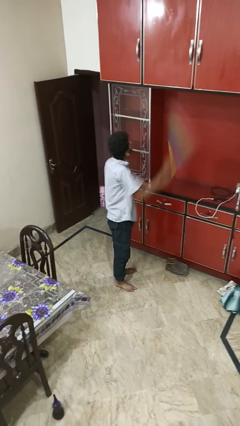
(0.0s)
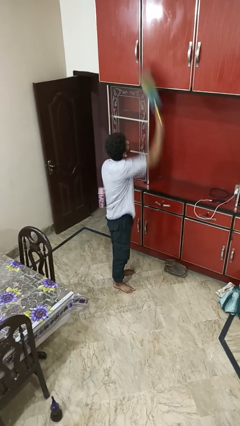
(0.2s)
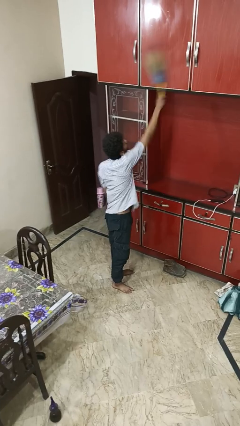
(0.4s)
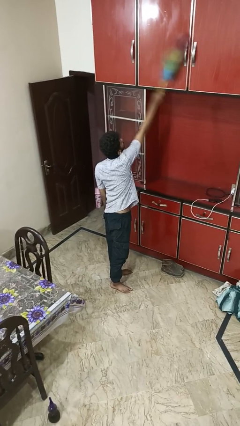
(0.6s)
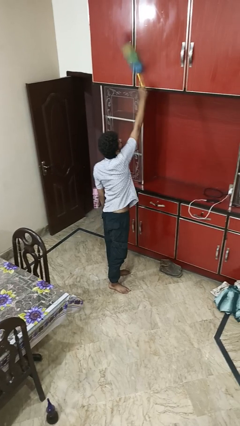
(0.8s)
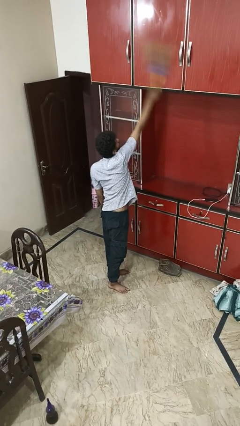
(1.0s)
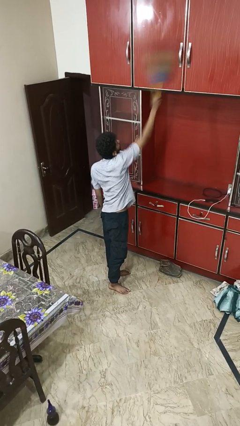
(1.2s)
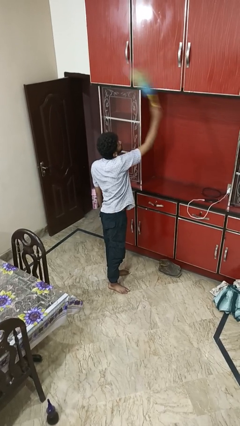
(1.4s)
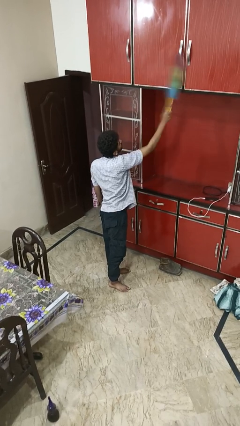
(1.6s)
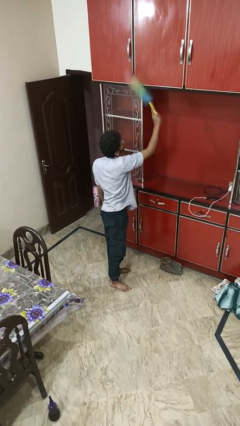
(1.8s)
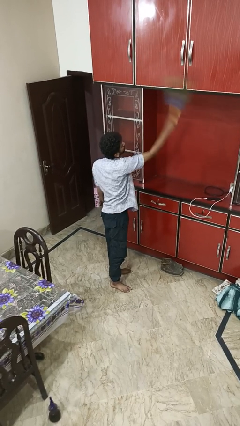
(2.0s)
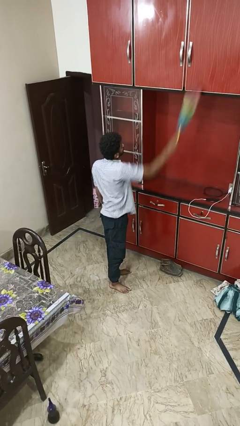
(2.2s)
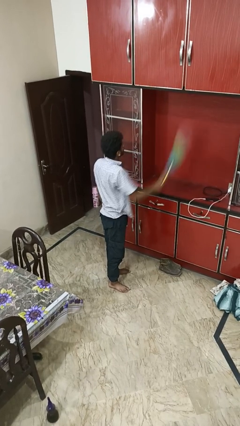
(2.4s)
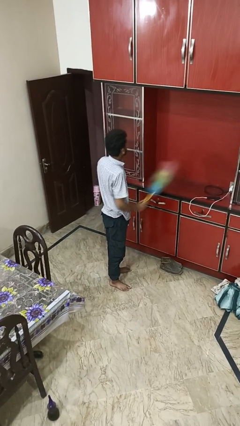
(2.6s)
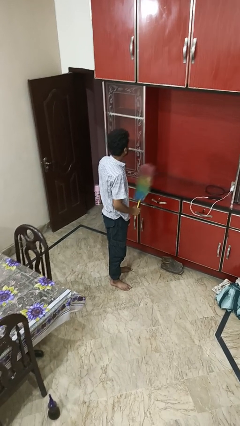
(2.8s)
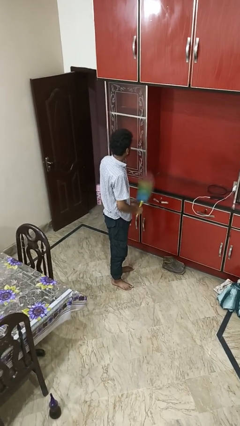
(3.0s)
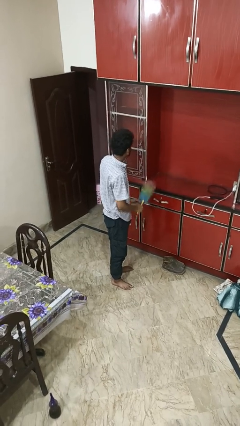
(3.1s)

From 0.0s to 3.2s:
person dusts furniture

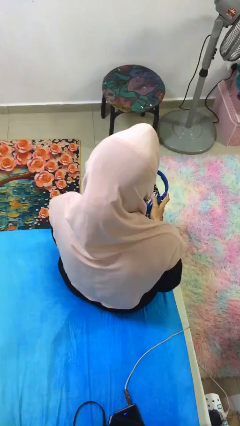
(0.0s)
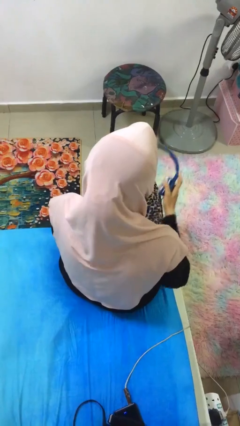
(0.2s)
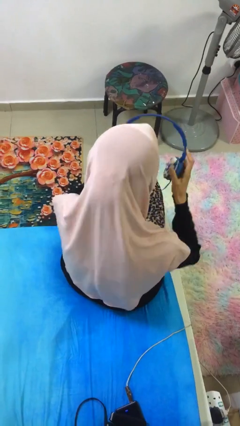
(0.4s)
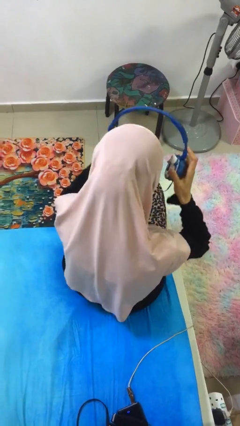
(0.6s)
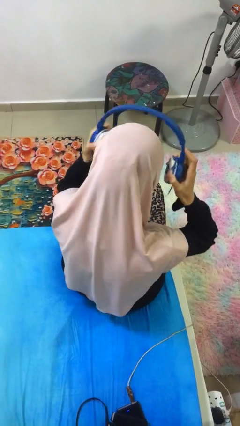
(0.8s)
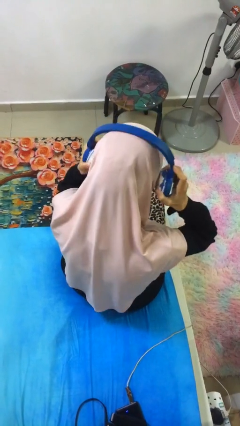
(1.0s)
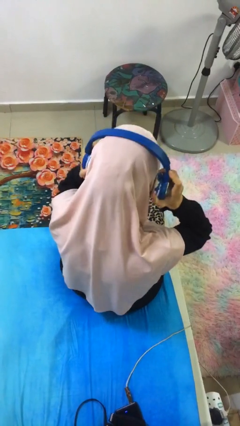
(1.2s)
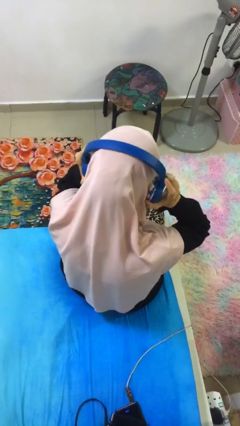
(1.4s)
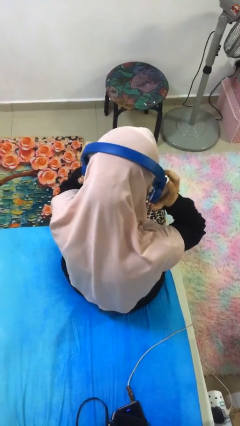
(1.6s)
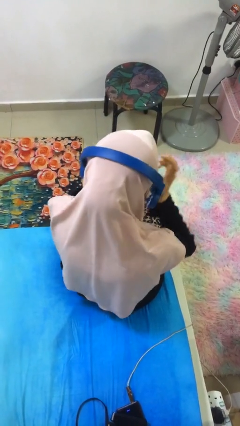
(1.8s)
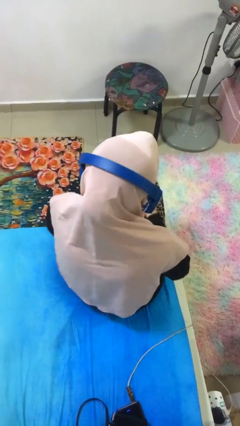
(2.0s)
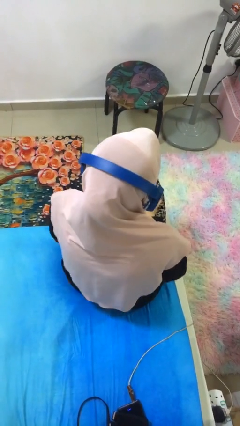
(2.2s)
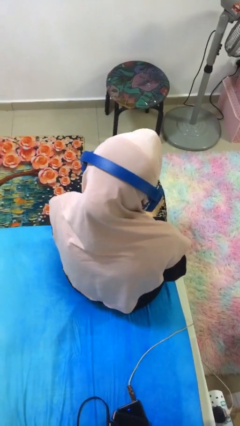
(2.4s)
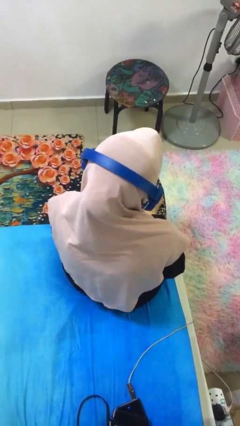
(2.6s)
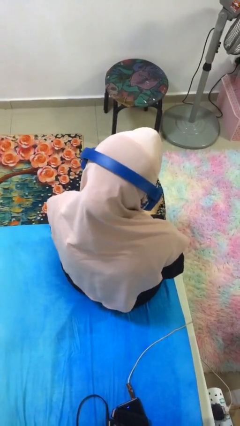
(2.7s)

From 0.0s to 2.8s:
person puts on headphones

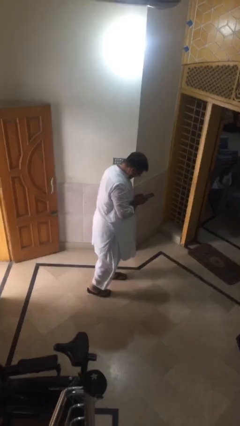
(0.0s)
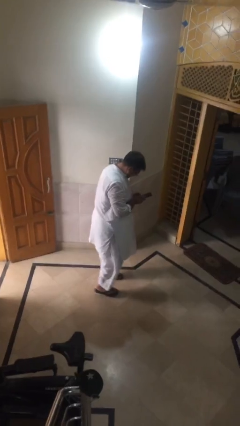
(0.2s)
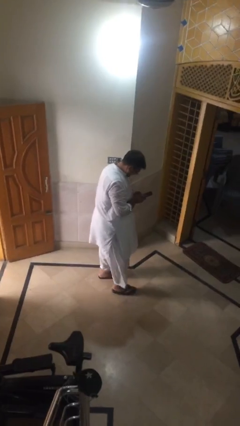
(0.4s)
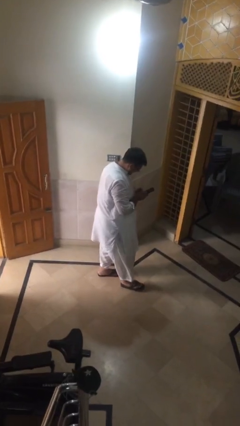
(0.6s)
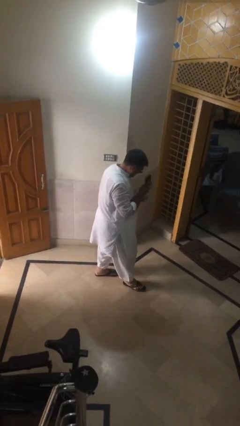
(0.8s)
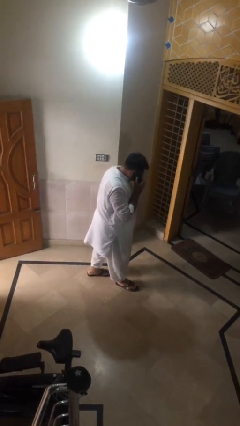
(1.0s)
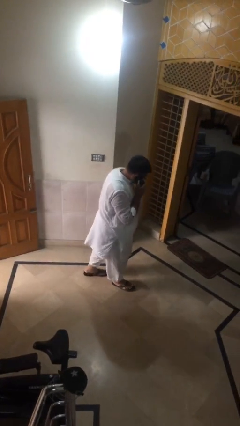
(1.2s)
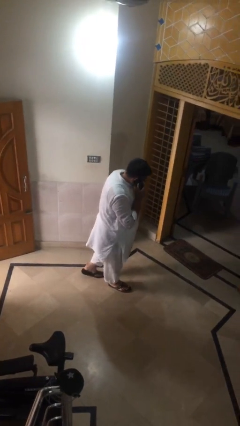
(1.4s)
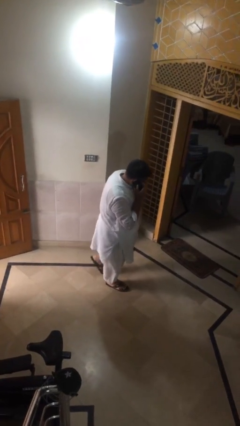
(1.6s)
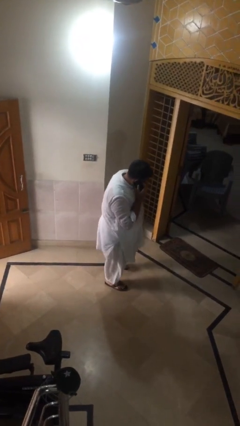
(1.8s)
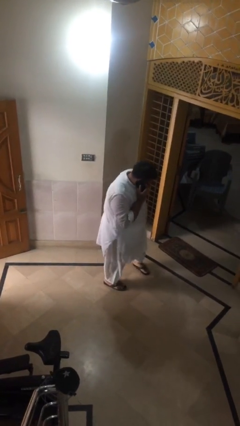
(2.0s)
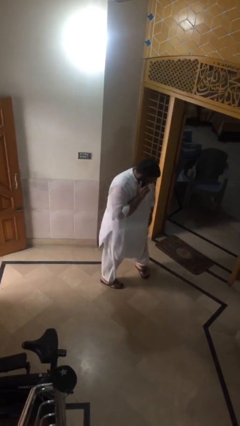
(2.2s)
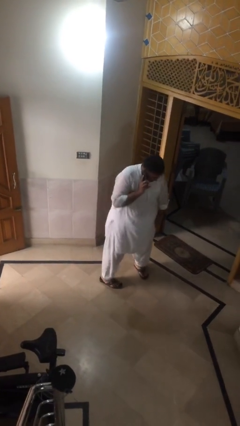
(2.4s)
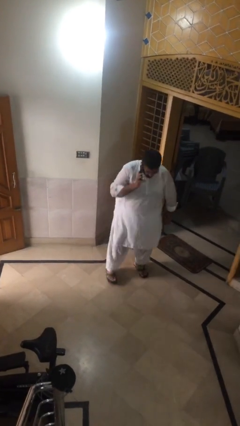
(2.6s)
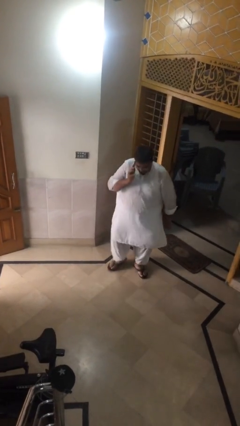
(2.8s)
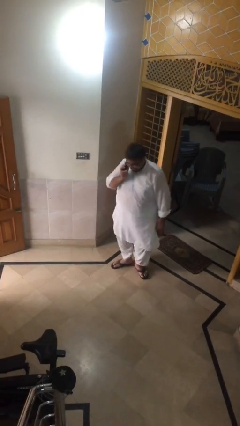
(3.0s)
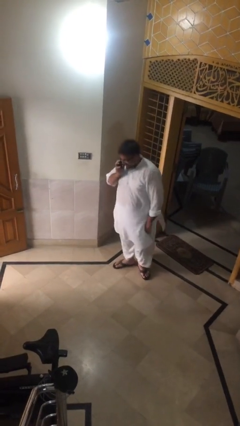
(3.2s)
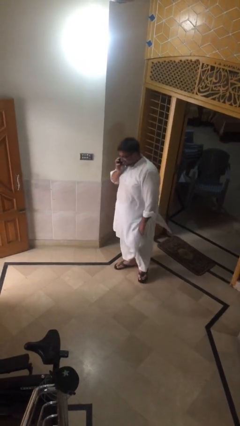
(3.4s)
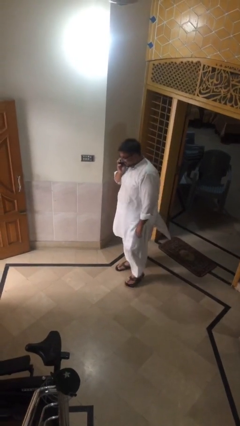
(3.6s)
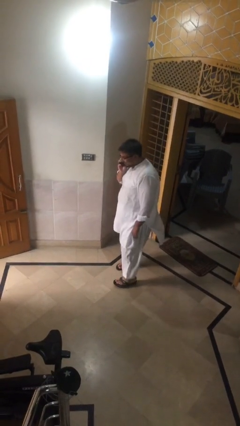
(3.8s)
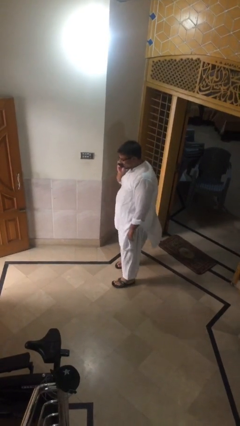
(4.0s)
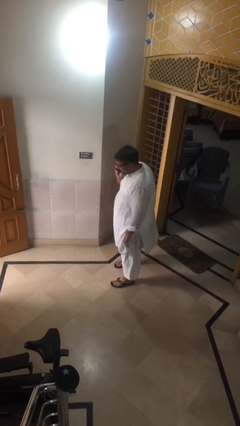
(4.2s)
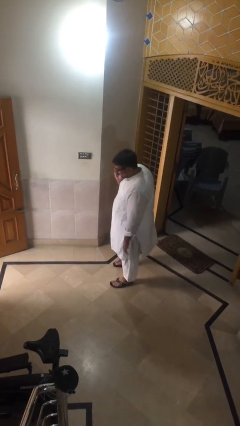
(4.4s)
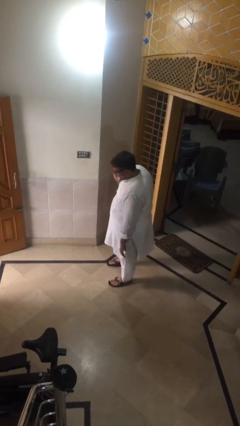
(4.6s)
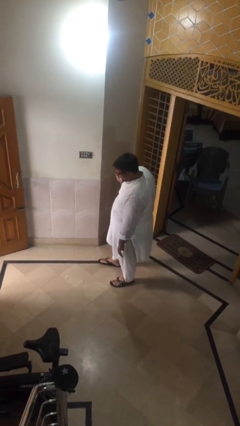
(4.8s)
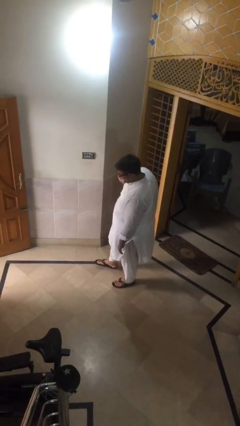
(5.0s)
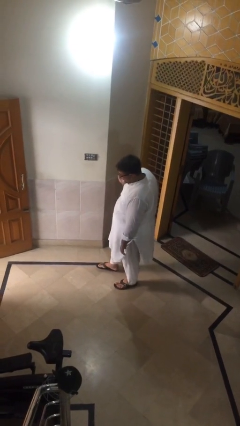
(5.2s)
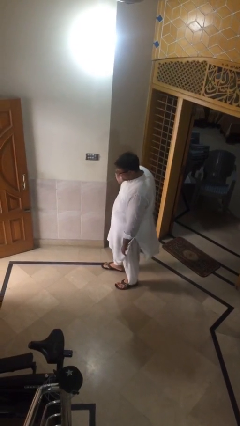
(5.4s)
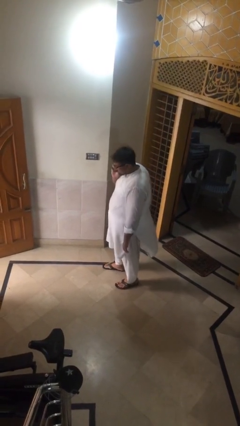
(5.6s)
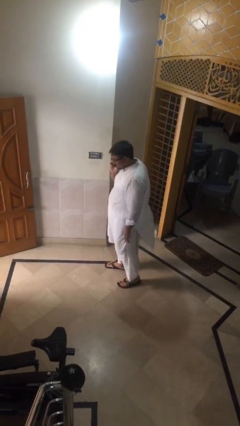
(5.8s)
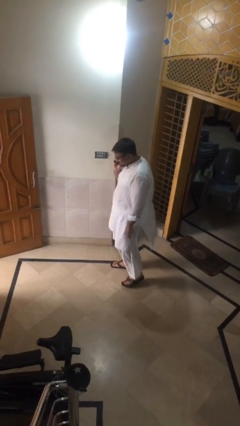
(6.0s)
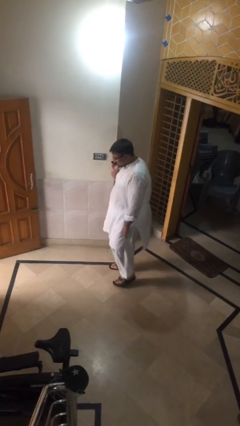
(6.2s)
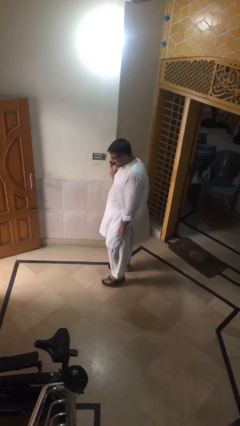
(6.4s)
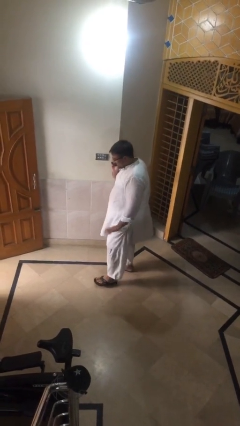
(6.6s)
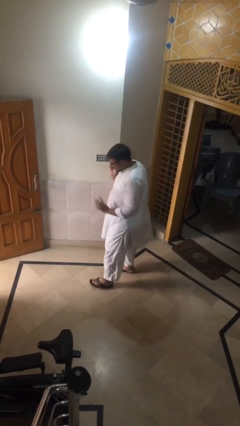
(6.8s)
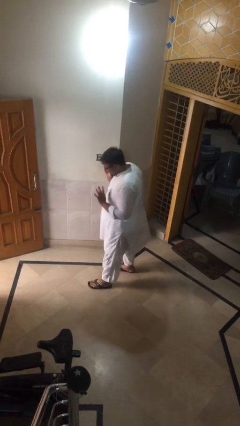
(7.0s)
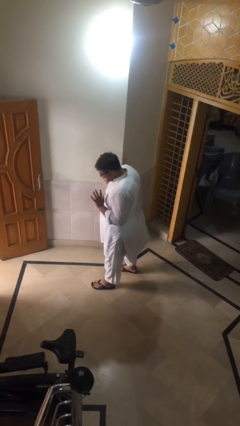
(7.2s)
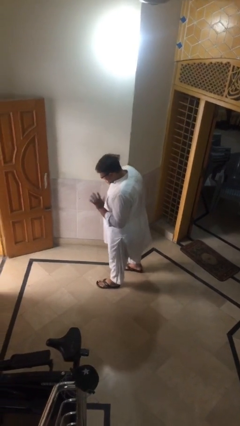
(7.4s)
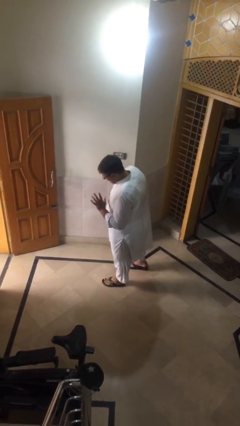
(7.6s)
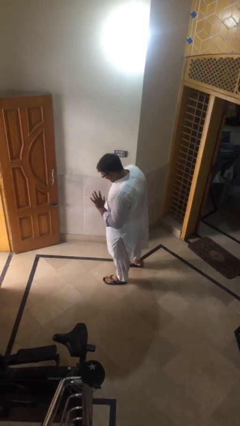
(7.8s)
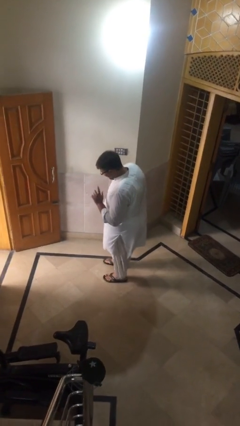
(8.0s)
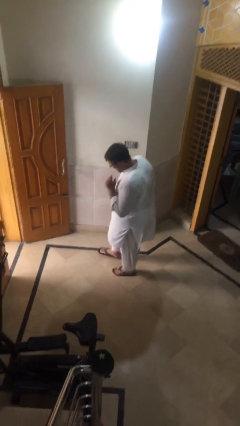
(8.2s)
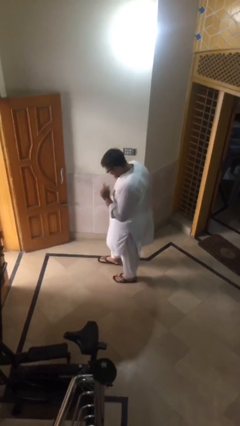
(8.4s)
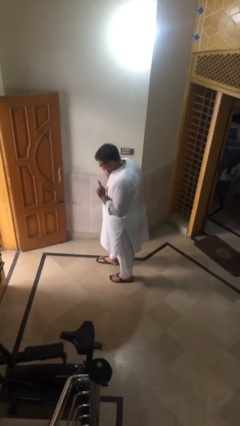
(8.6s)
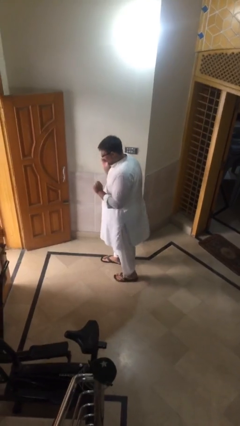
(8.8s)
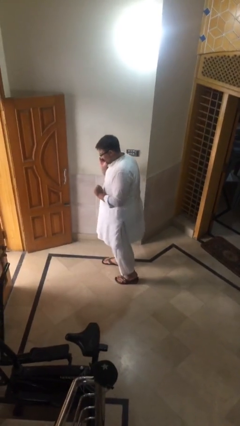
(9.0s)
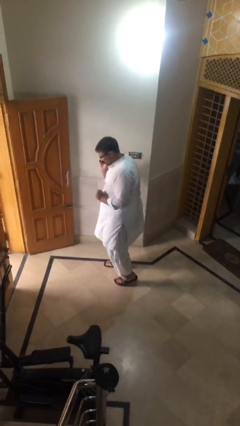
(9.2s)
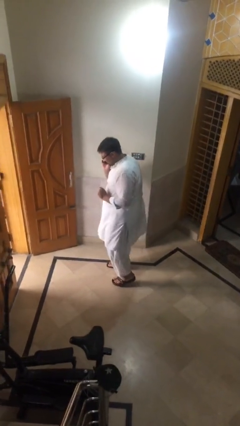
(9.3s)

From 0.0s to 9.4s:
person talks on phone

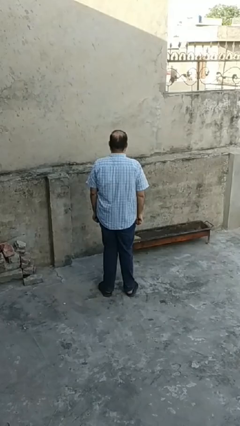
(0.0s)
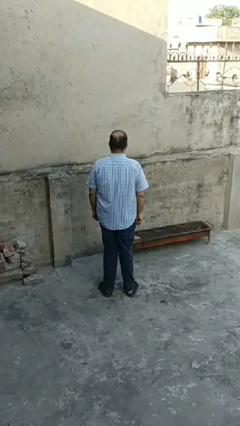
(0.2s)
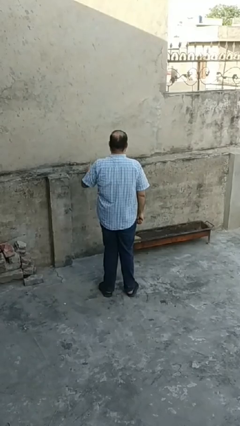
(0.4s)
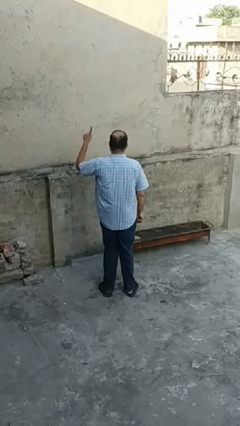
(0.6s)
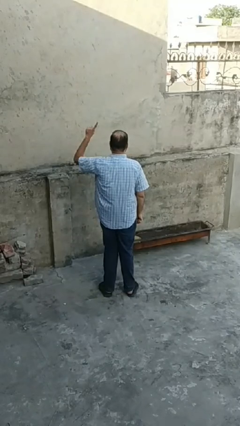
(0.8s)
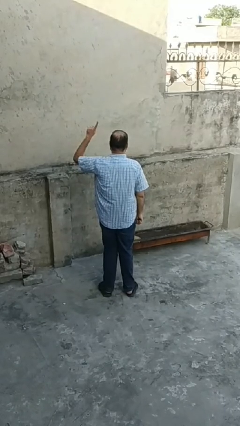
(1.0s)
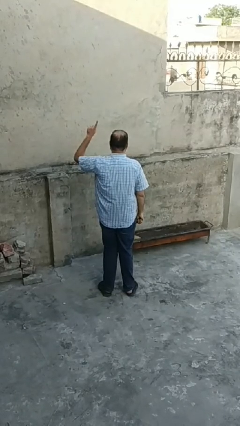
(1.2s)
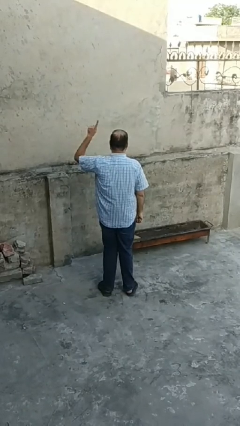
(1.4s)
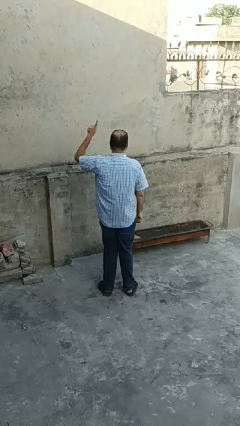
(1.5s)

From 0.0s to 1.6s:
person gestures number one

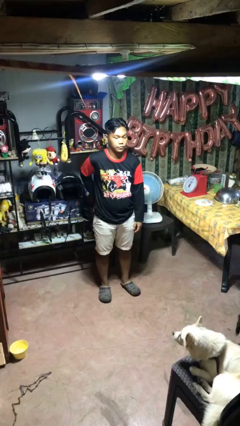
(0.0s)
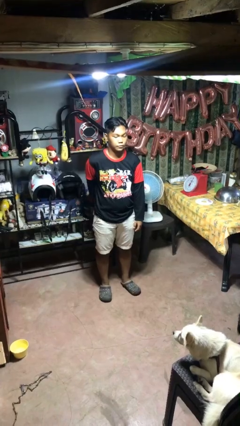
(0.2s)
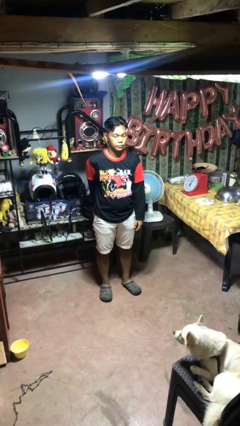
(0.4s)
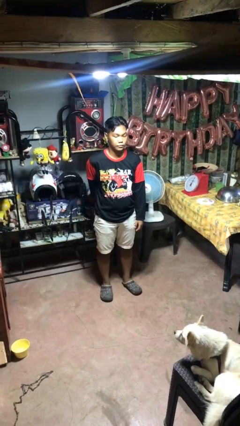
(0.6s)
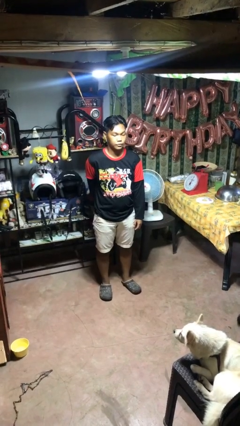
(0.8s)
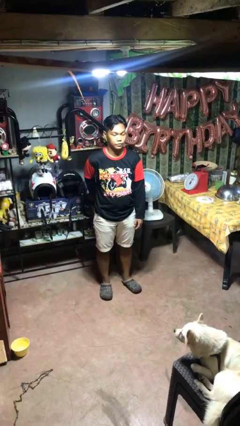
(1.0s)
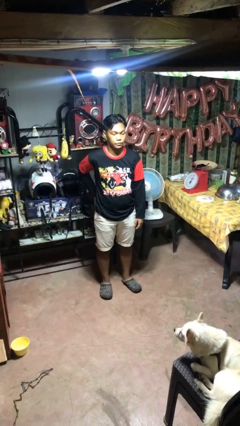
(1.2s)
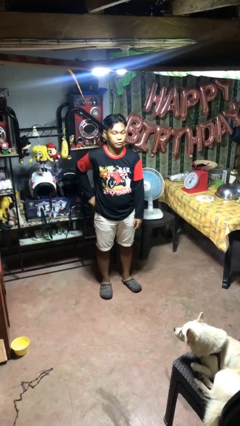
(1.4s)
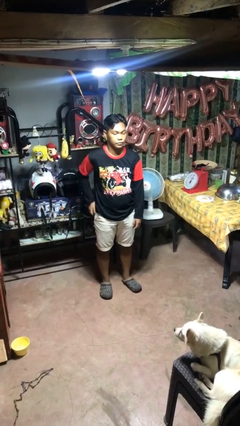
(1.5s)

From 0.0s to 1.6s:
person puts hands in back pockets
